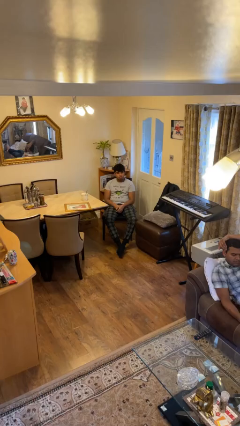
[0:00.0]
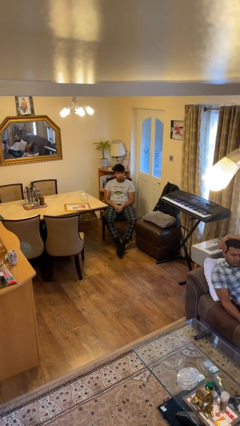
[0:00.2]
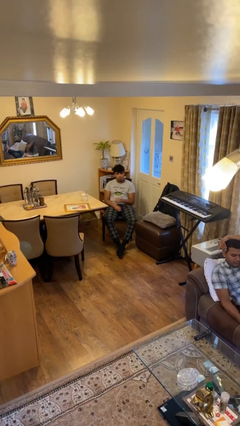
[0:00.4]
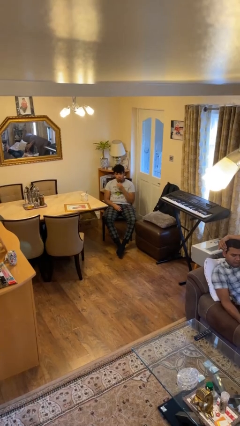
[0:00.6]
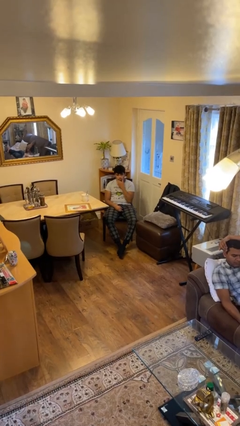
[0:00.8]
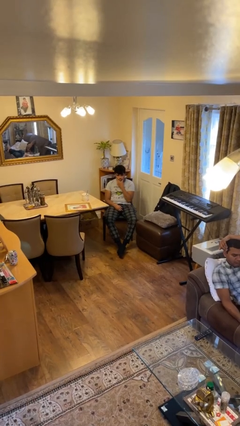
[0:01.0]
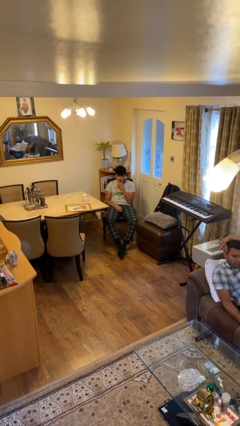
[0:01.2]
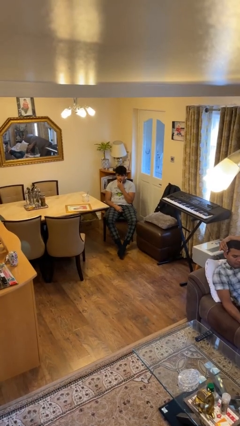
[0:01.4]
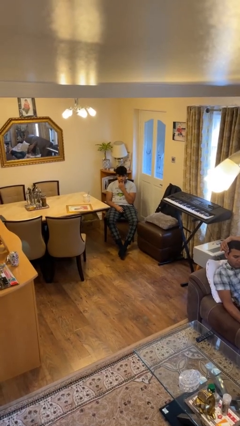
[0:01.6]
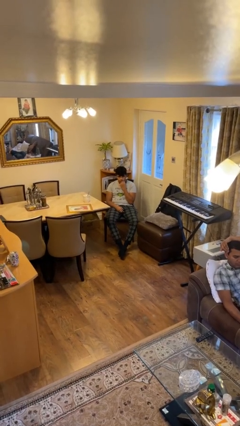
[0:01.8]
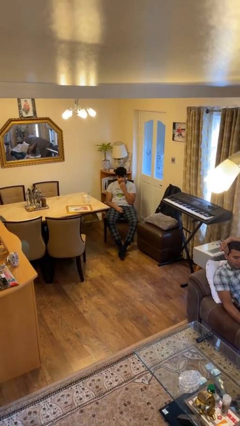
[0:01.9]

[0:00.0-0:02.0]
person strokes chin

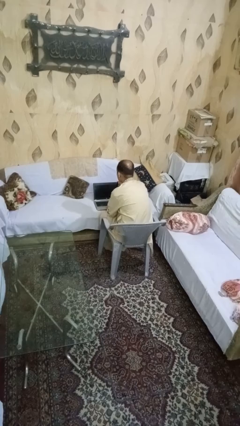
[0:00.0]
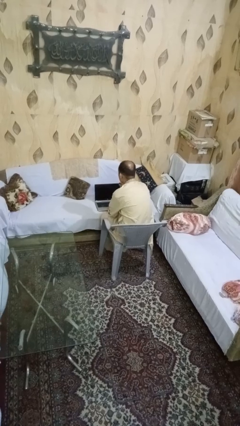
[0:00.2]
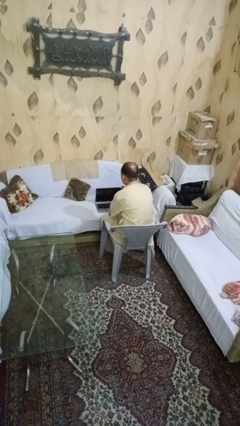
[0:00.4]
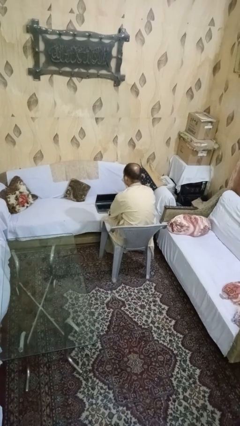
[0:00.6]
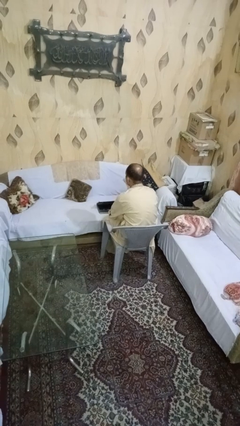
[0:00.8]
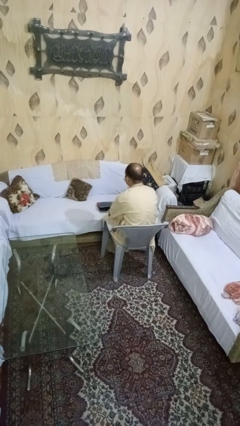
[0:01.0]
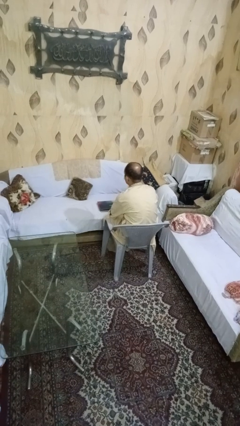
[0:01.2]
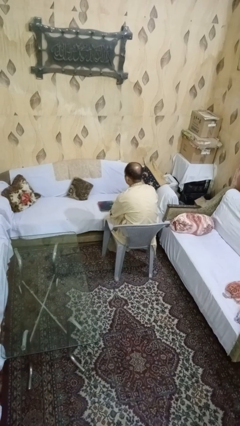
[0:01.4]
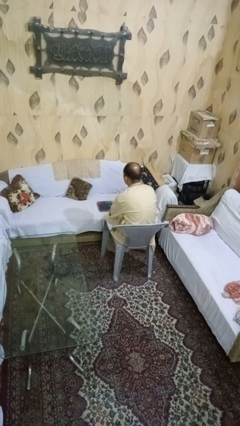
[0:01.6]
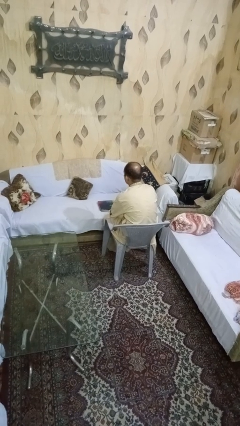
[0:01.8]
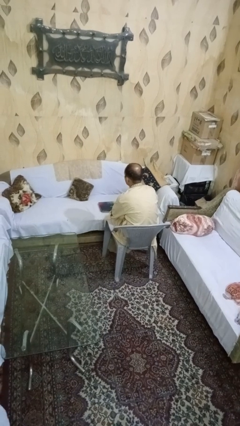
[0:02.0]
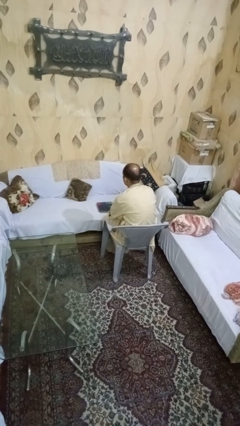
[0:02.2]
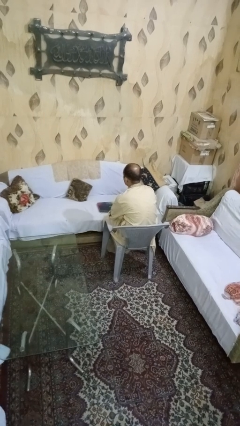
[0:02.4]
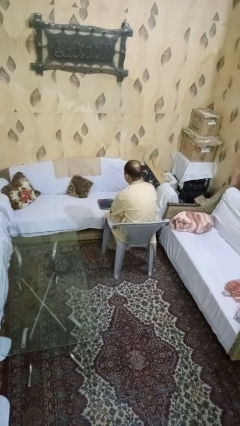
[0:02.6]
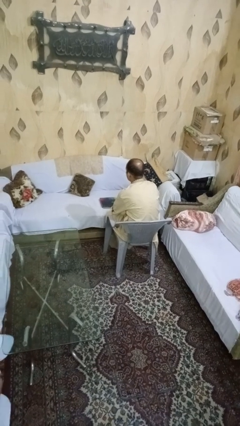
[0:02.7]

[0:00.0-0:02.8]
person closes laptop

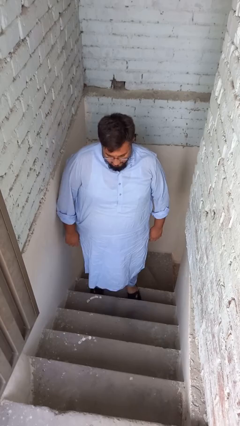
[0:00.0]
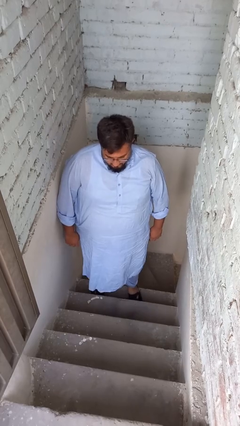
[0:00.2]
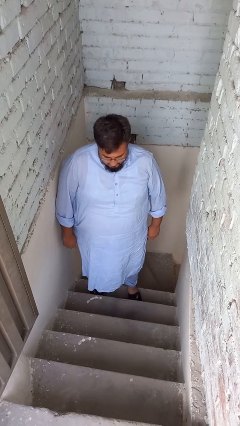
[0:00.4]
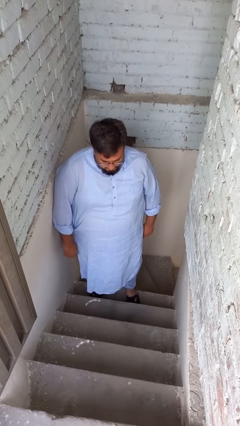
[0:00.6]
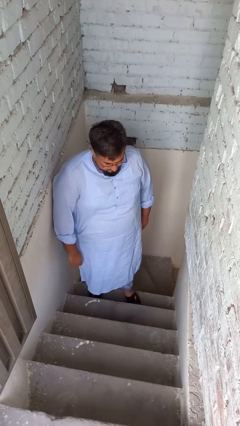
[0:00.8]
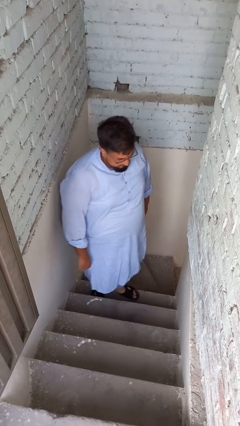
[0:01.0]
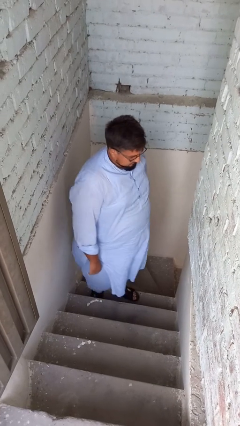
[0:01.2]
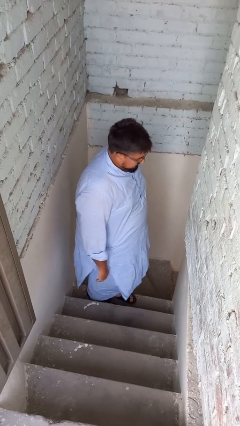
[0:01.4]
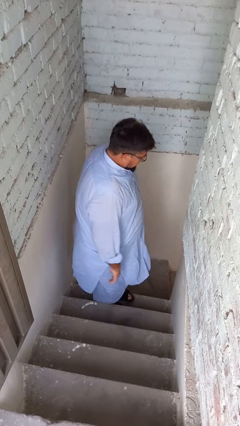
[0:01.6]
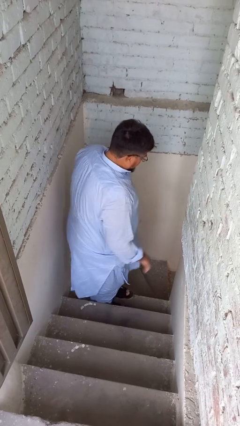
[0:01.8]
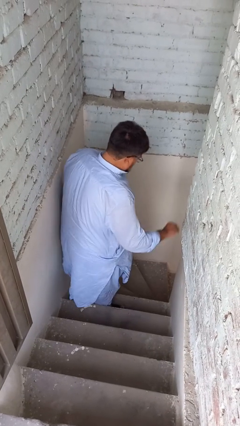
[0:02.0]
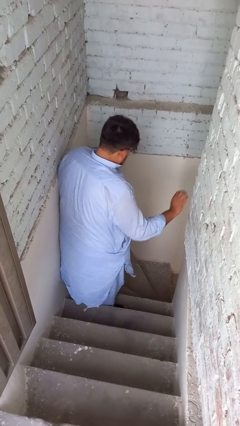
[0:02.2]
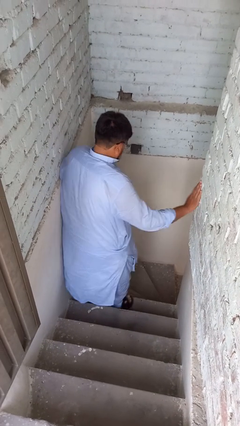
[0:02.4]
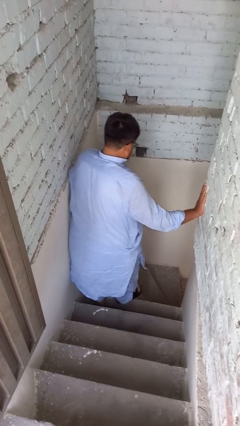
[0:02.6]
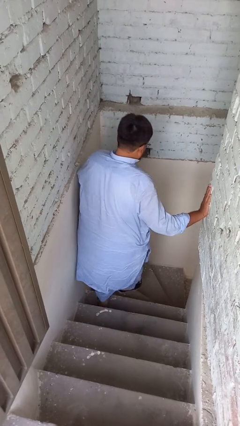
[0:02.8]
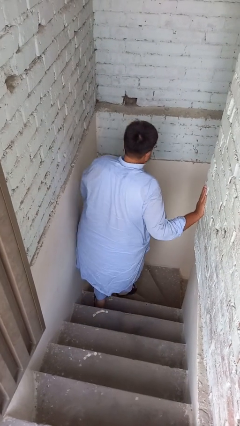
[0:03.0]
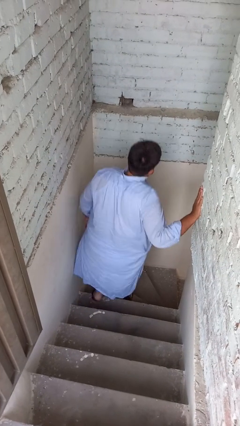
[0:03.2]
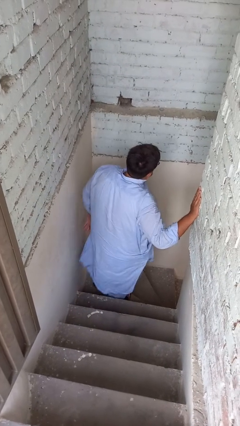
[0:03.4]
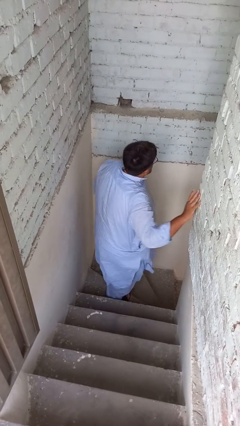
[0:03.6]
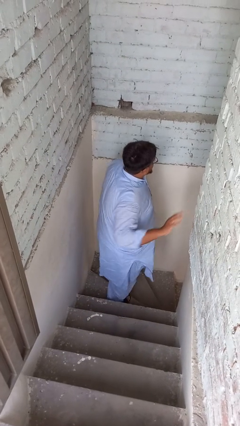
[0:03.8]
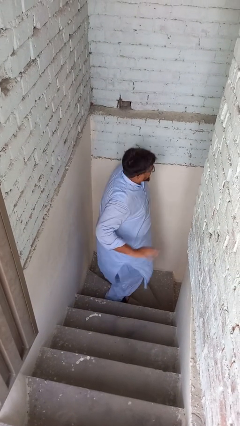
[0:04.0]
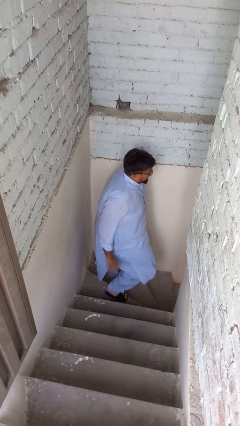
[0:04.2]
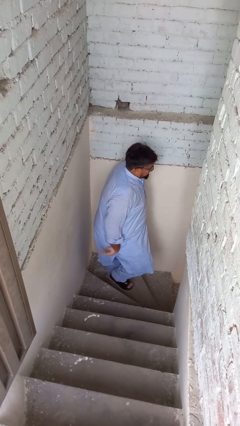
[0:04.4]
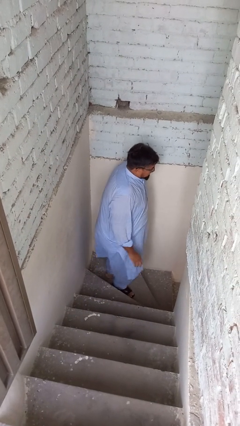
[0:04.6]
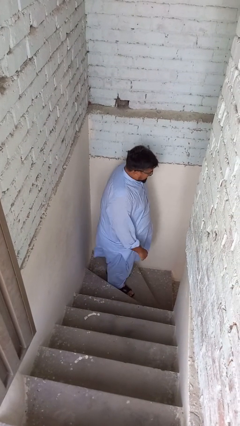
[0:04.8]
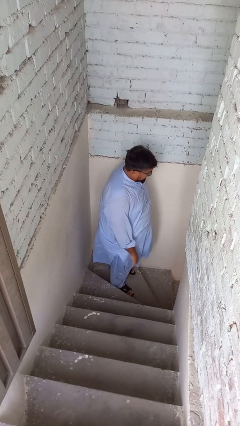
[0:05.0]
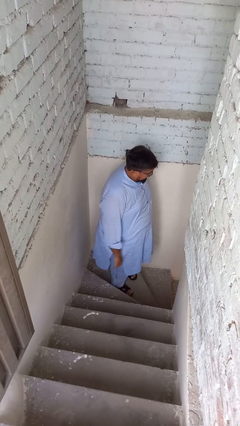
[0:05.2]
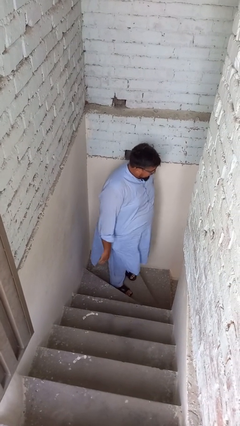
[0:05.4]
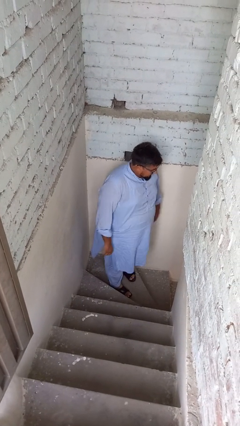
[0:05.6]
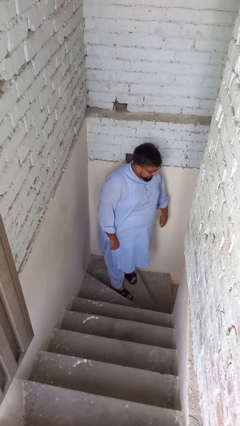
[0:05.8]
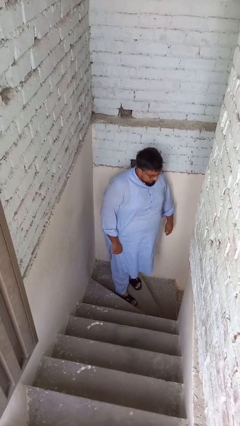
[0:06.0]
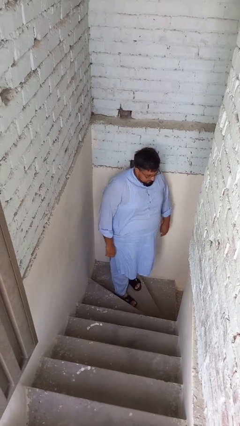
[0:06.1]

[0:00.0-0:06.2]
person climbs down stairs

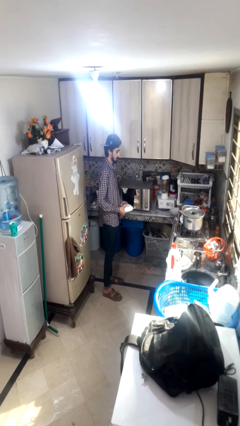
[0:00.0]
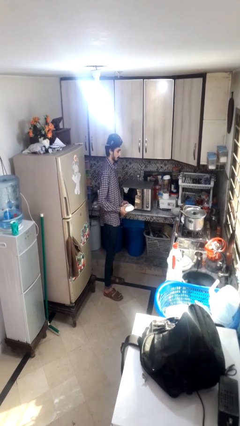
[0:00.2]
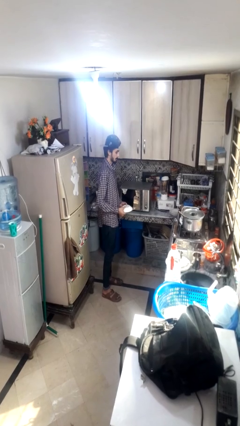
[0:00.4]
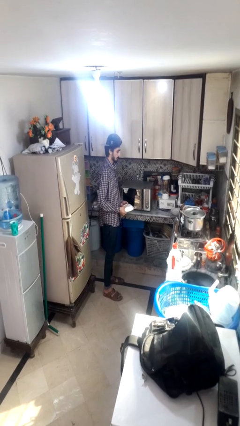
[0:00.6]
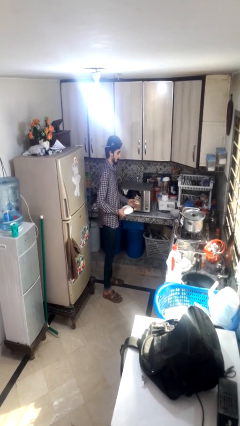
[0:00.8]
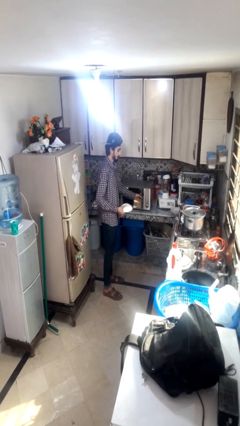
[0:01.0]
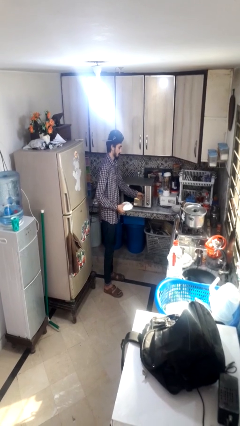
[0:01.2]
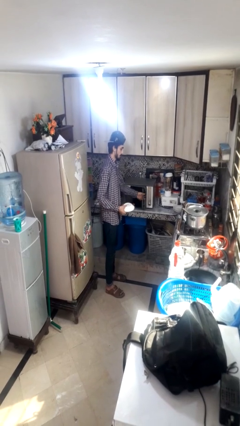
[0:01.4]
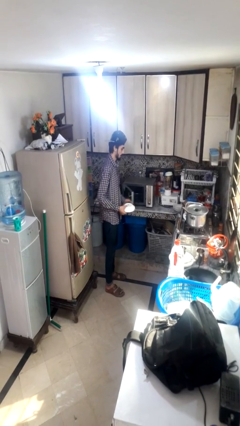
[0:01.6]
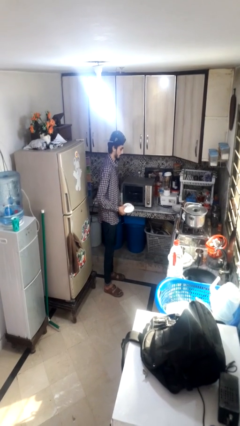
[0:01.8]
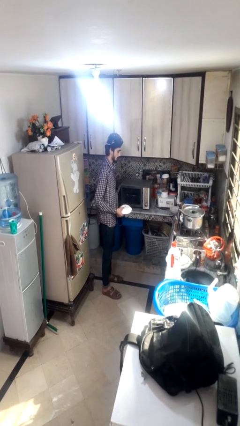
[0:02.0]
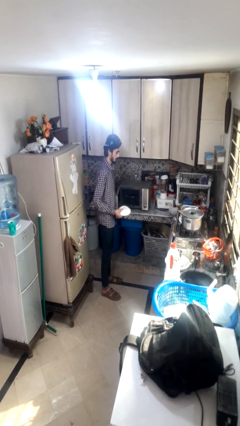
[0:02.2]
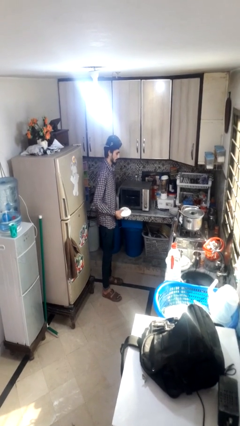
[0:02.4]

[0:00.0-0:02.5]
person opens microwave

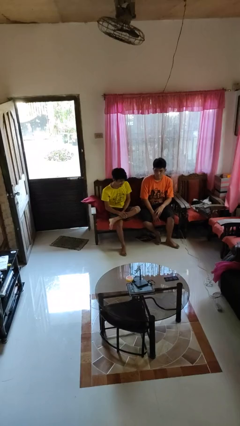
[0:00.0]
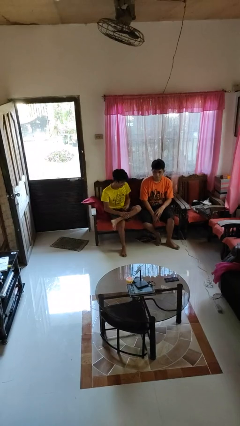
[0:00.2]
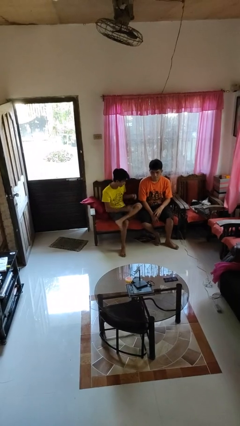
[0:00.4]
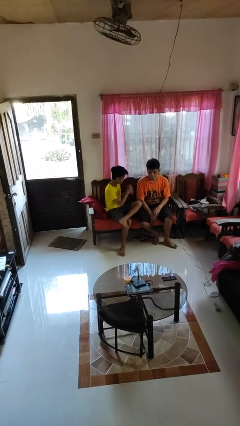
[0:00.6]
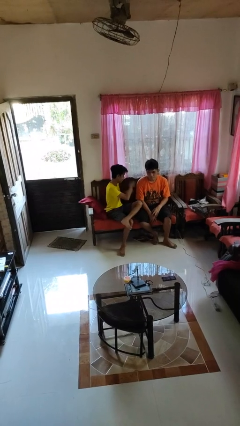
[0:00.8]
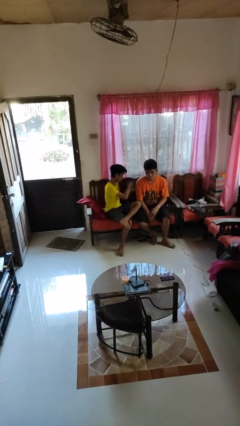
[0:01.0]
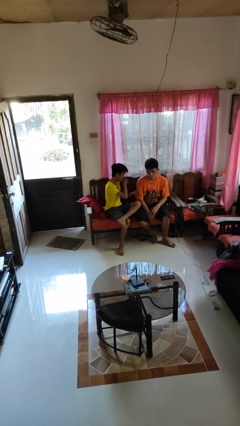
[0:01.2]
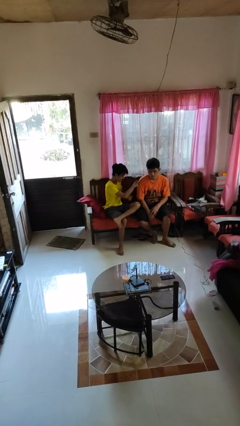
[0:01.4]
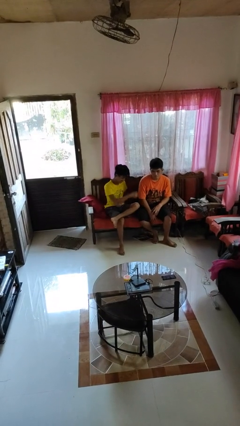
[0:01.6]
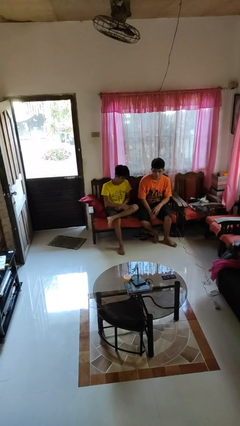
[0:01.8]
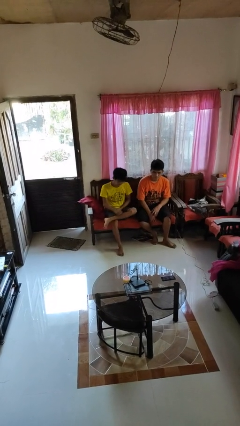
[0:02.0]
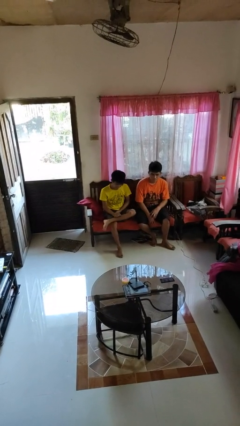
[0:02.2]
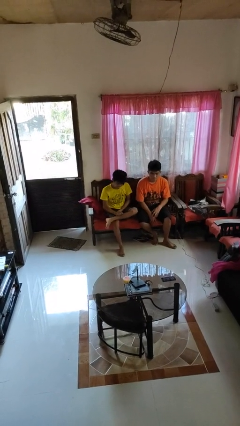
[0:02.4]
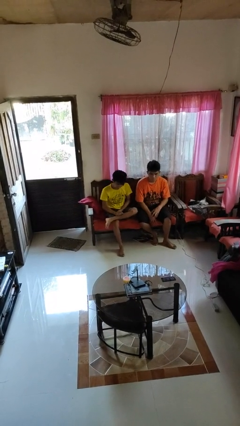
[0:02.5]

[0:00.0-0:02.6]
person pounds shoulders of person

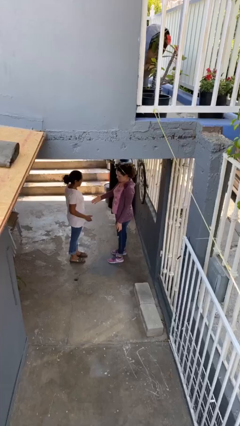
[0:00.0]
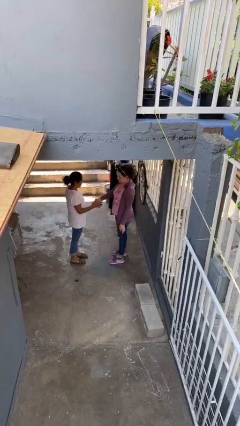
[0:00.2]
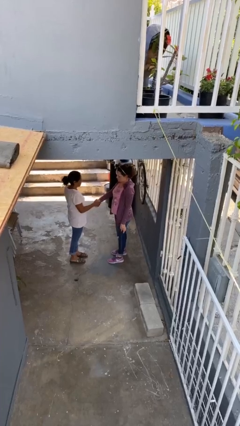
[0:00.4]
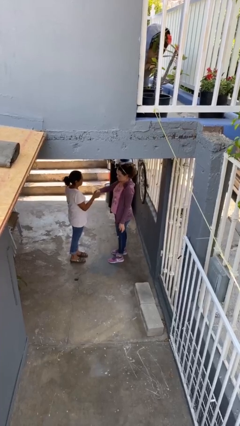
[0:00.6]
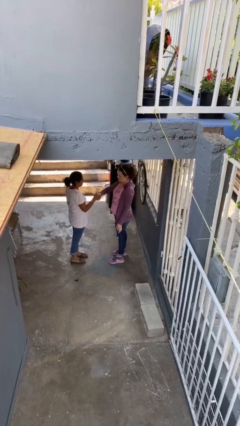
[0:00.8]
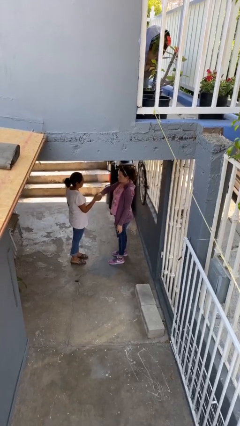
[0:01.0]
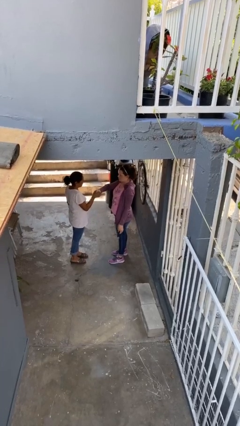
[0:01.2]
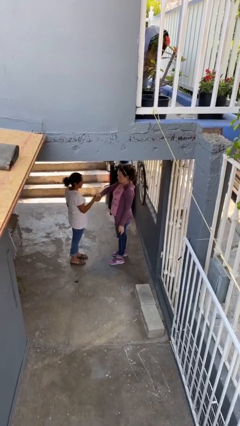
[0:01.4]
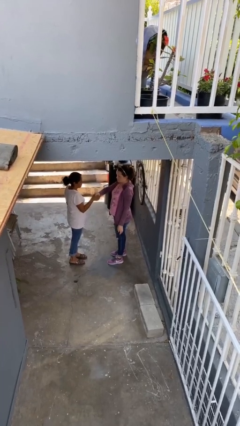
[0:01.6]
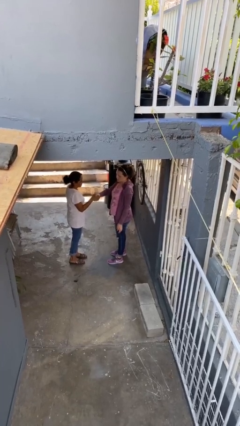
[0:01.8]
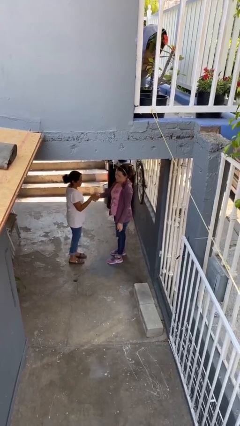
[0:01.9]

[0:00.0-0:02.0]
person shakes hand
